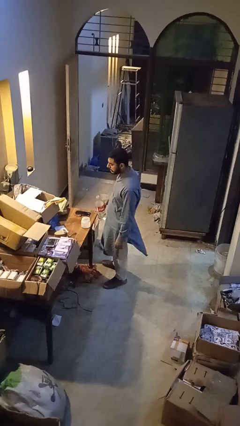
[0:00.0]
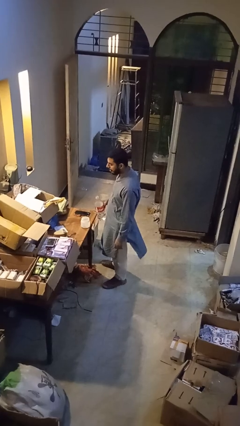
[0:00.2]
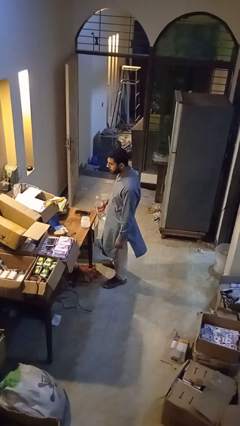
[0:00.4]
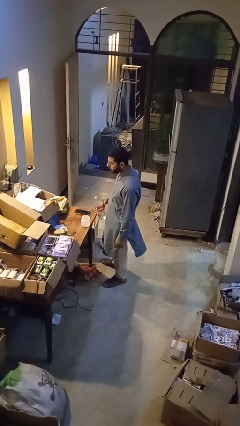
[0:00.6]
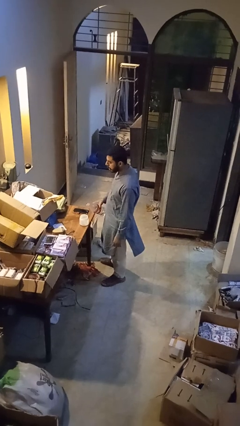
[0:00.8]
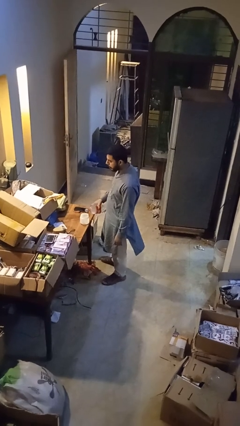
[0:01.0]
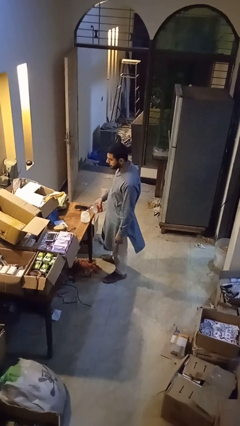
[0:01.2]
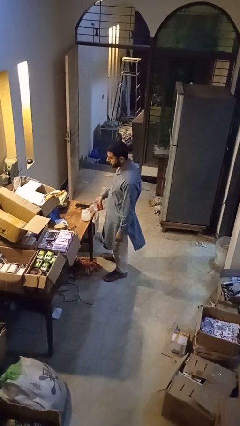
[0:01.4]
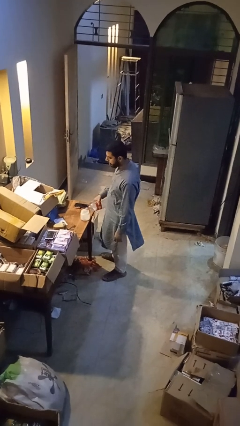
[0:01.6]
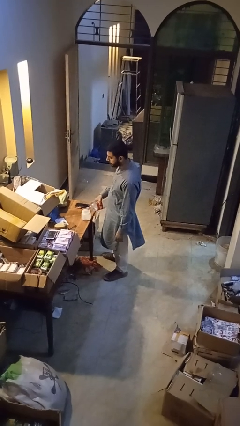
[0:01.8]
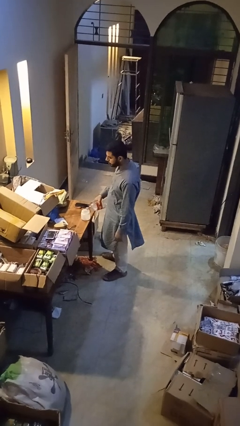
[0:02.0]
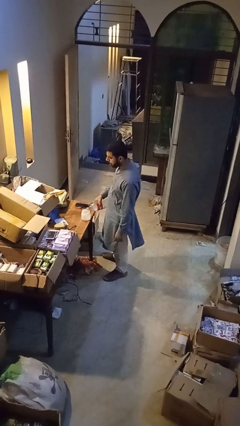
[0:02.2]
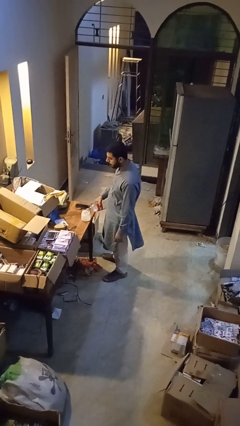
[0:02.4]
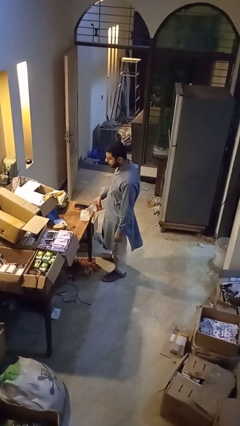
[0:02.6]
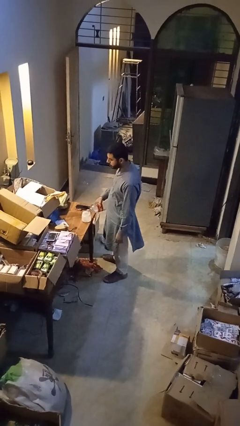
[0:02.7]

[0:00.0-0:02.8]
person pours liquid into cup

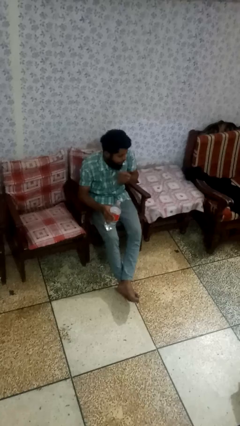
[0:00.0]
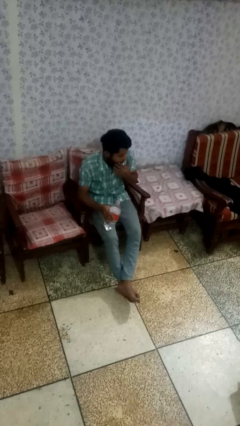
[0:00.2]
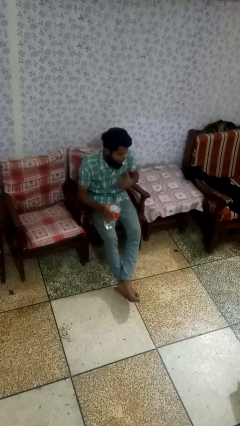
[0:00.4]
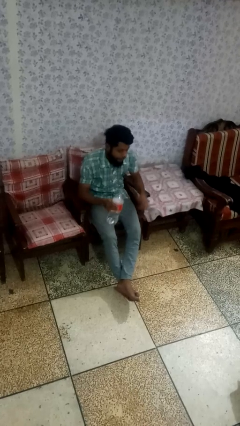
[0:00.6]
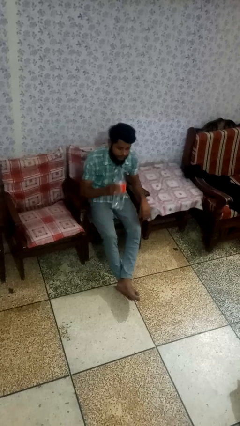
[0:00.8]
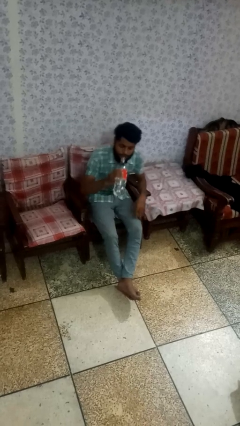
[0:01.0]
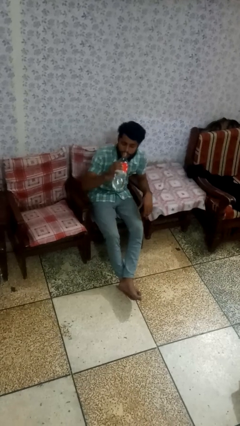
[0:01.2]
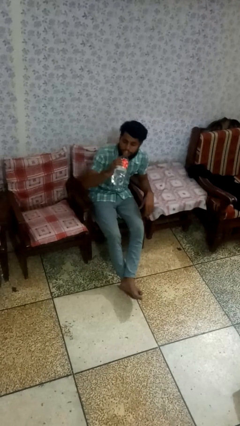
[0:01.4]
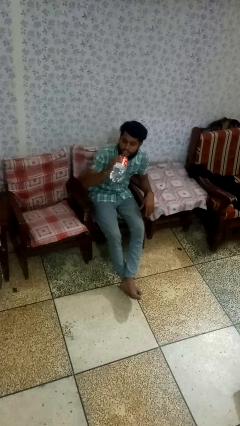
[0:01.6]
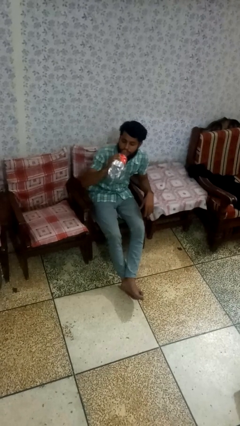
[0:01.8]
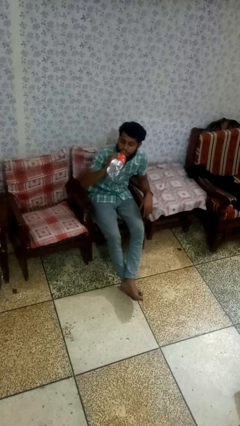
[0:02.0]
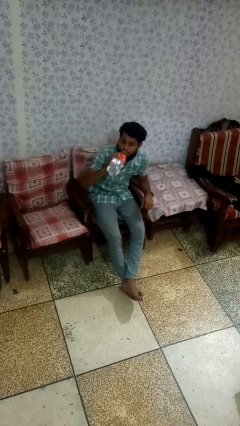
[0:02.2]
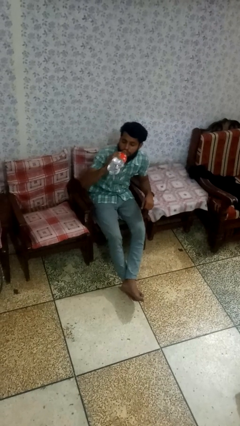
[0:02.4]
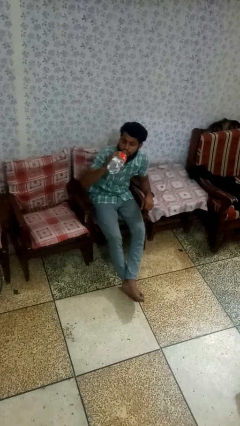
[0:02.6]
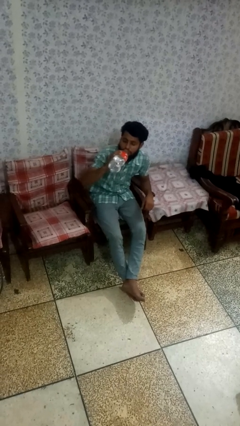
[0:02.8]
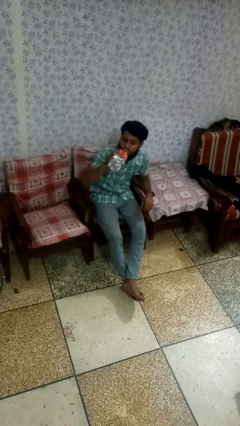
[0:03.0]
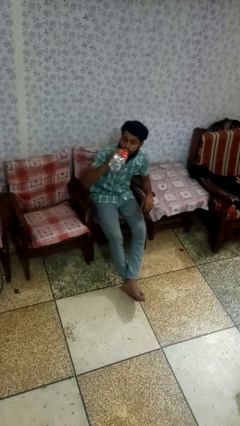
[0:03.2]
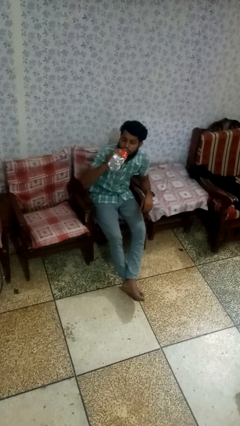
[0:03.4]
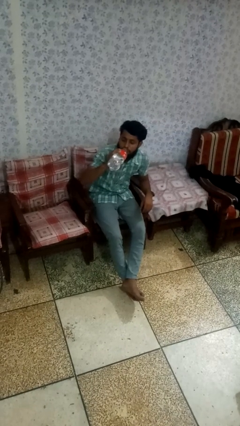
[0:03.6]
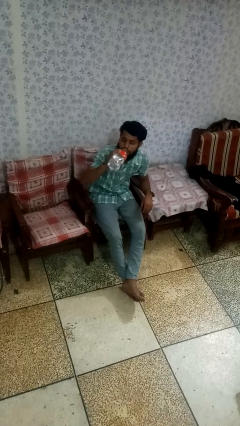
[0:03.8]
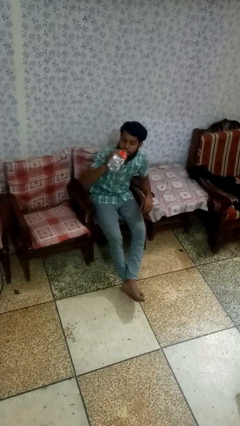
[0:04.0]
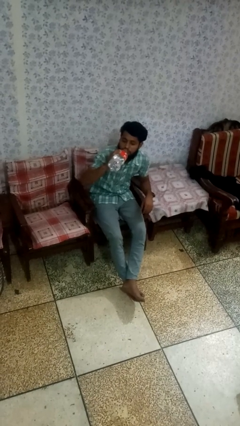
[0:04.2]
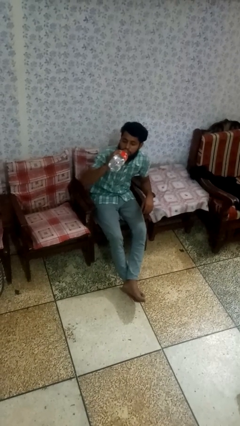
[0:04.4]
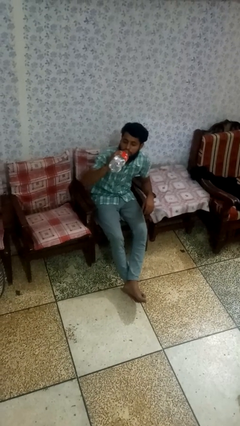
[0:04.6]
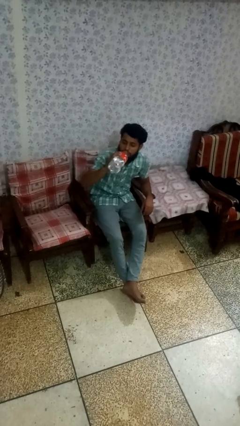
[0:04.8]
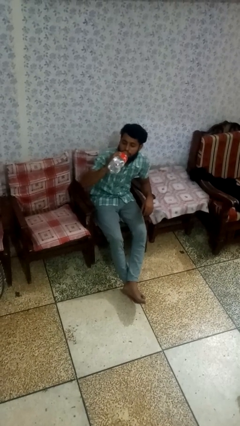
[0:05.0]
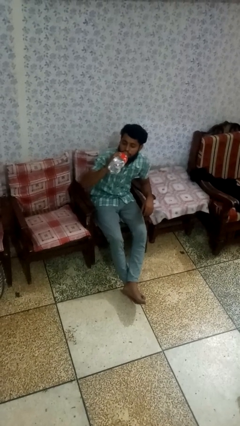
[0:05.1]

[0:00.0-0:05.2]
person drinks from bottle

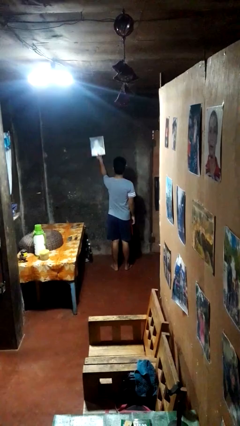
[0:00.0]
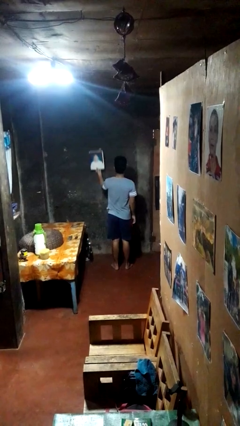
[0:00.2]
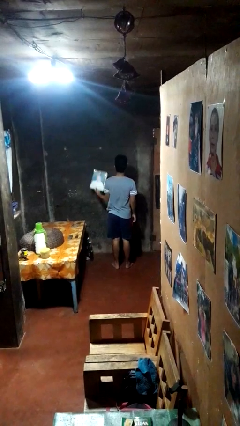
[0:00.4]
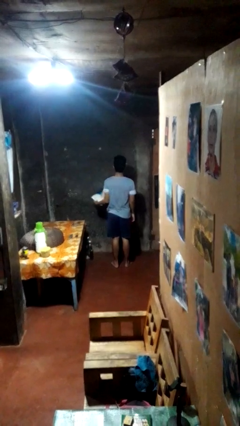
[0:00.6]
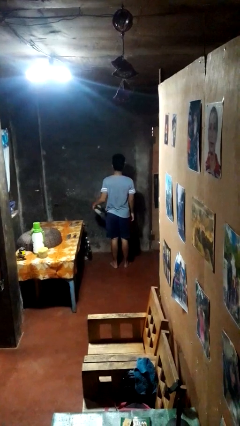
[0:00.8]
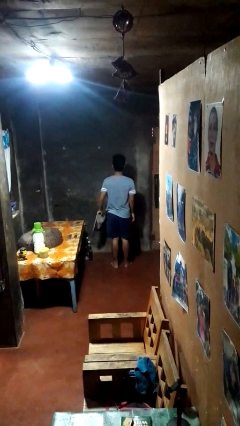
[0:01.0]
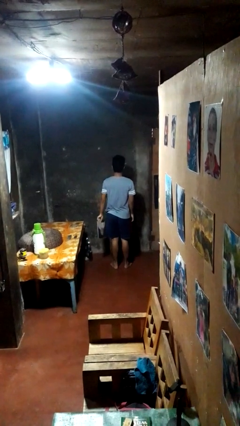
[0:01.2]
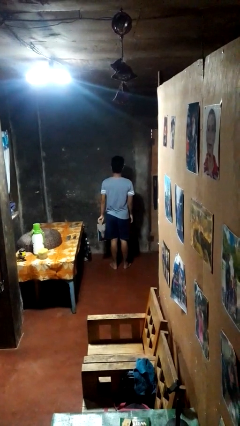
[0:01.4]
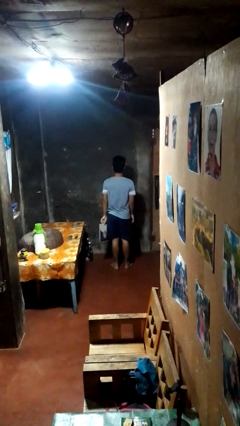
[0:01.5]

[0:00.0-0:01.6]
person takes down picture frame

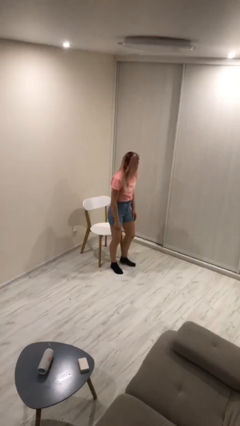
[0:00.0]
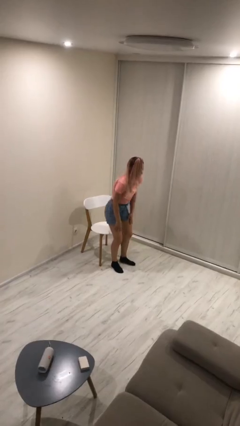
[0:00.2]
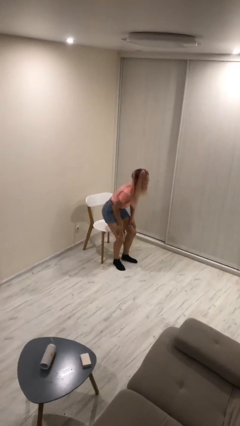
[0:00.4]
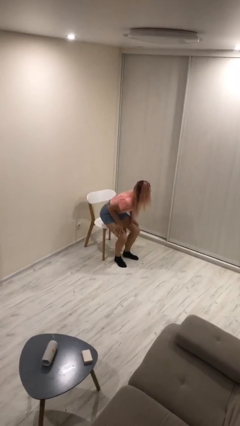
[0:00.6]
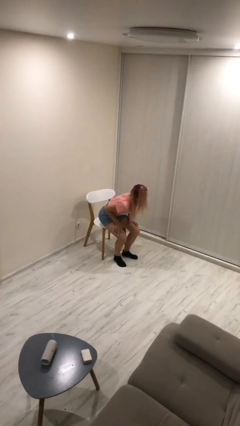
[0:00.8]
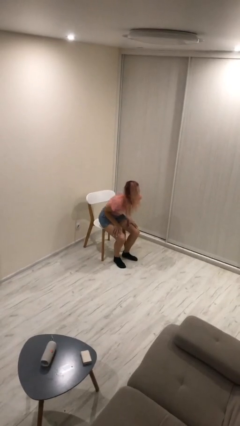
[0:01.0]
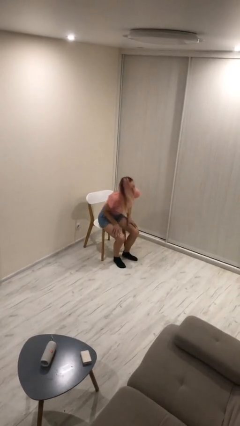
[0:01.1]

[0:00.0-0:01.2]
person sits down

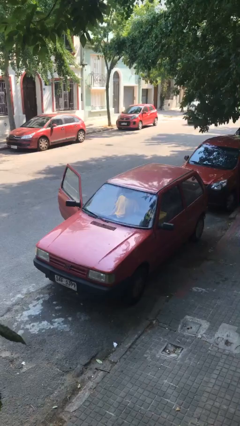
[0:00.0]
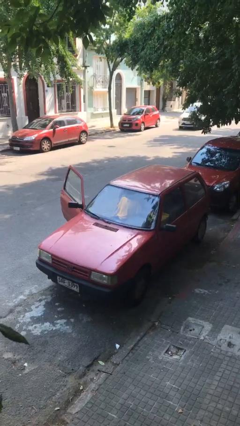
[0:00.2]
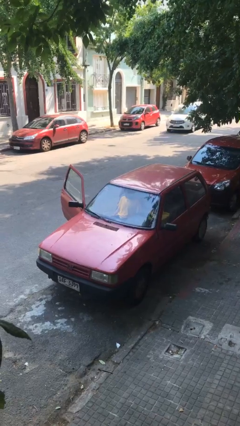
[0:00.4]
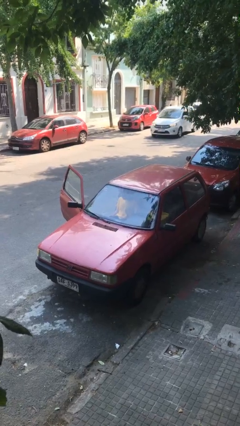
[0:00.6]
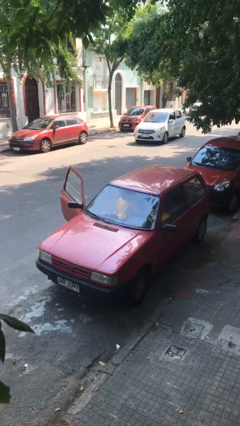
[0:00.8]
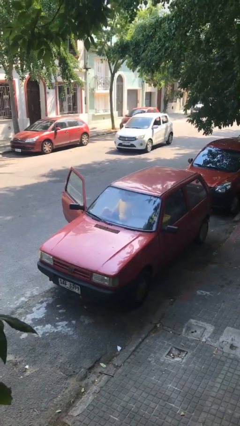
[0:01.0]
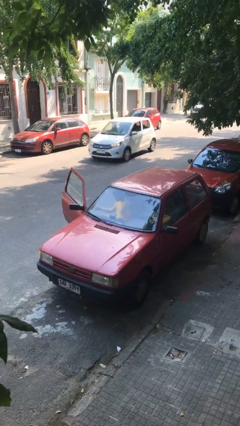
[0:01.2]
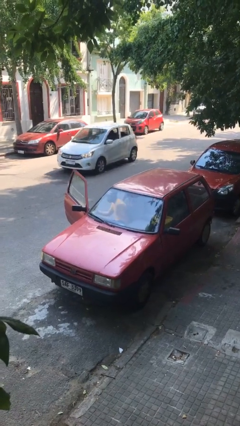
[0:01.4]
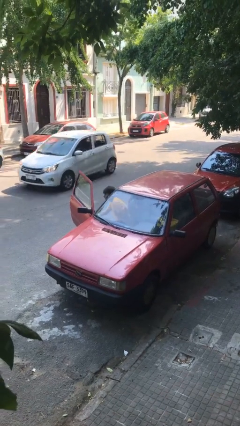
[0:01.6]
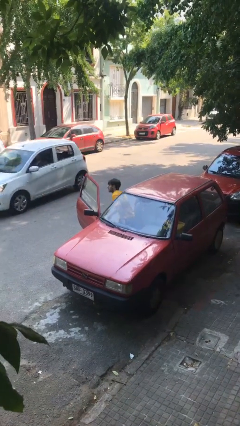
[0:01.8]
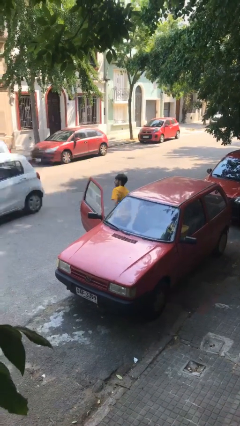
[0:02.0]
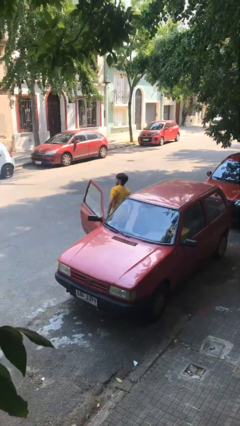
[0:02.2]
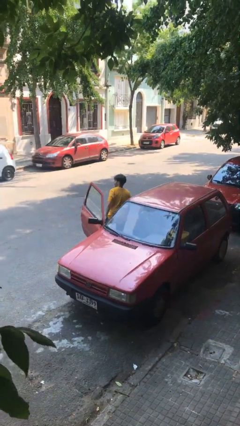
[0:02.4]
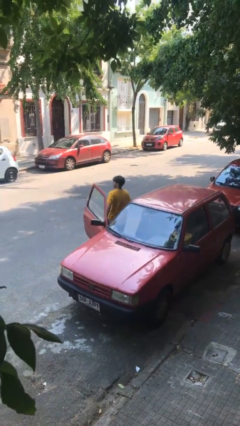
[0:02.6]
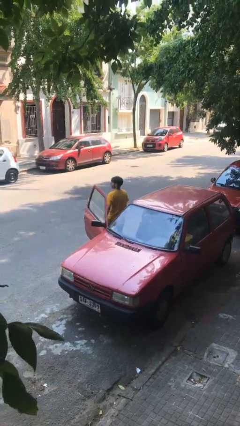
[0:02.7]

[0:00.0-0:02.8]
person exits car

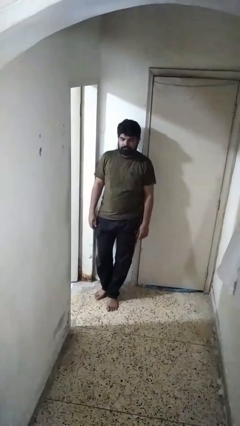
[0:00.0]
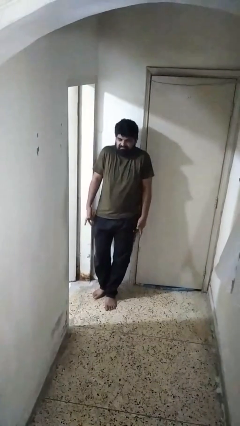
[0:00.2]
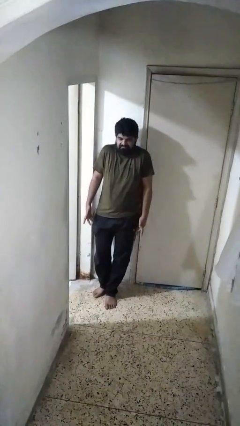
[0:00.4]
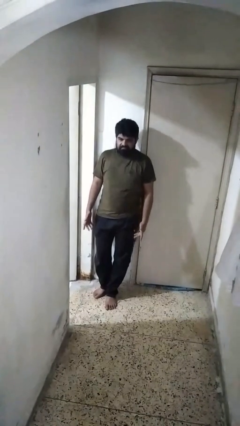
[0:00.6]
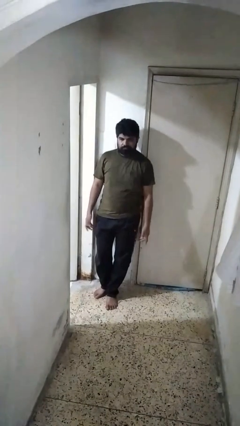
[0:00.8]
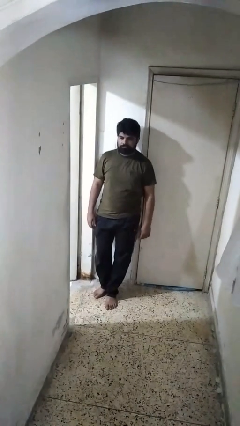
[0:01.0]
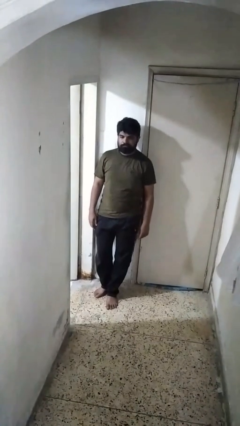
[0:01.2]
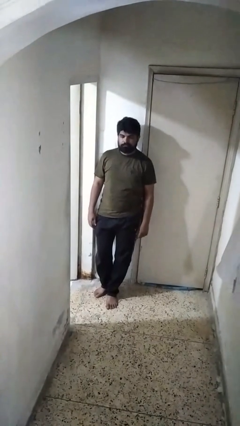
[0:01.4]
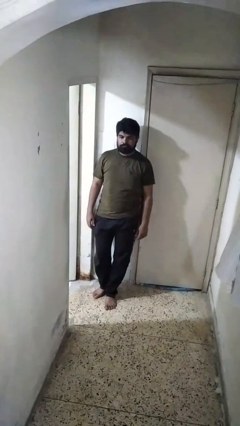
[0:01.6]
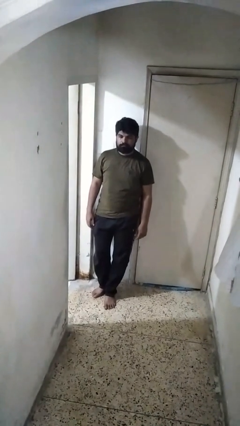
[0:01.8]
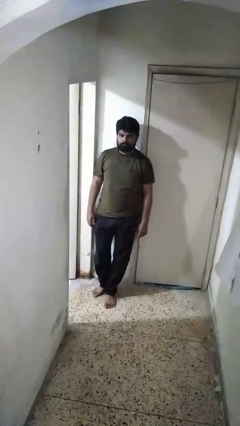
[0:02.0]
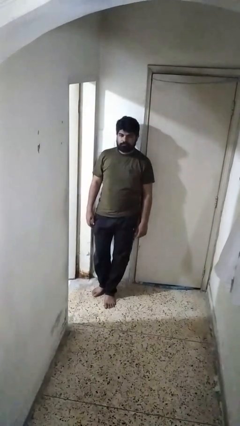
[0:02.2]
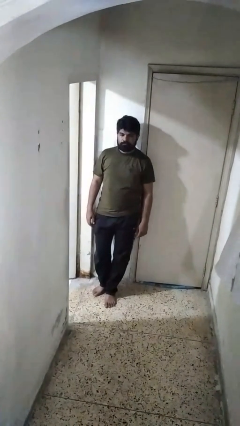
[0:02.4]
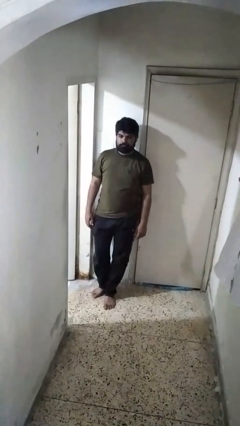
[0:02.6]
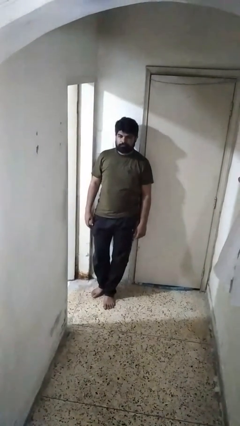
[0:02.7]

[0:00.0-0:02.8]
person shrugs

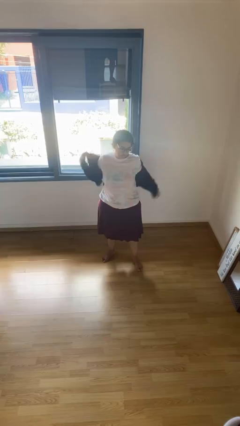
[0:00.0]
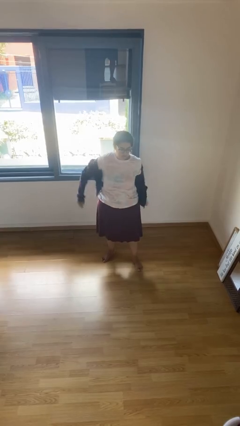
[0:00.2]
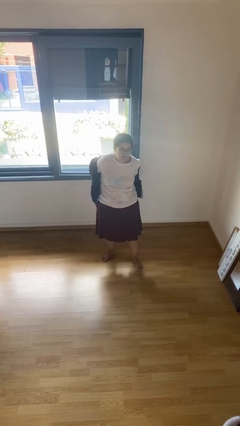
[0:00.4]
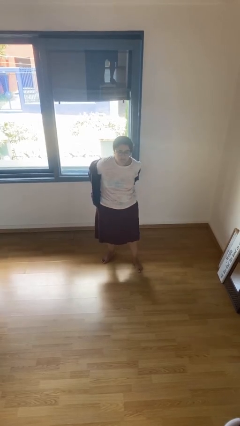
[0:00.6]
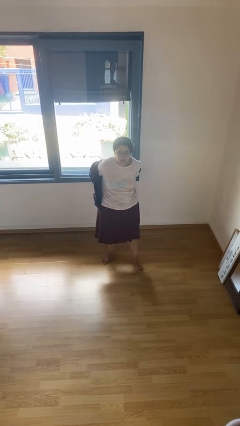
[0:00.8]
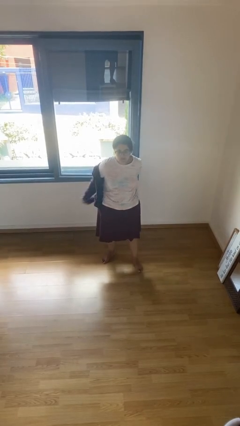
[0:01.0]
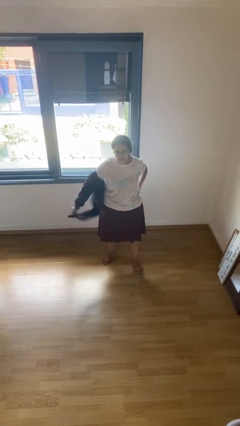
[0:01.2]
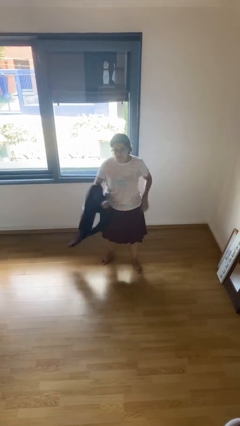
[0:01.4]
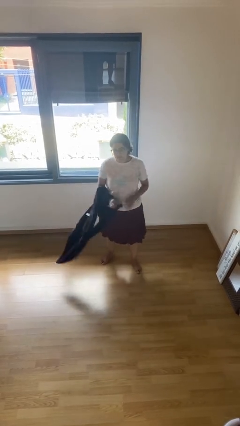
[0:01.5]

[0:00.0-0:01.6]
person takes off jacket
